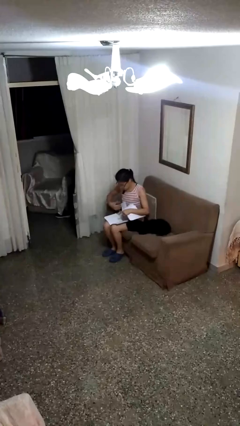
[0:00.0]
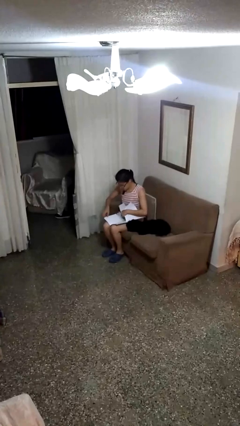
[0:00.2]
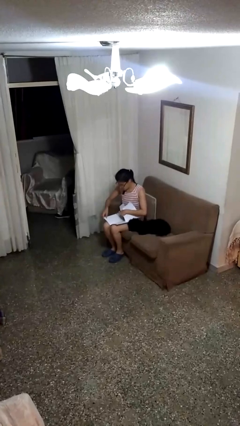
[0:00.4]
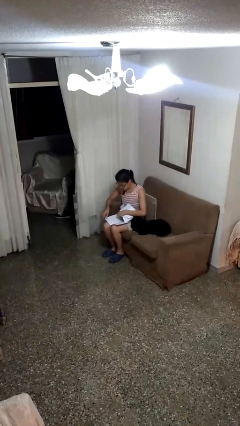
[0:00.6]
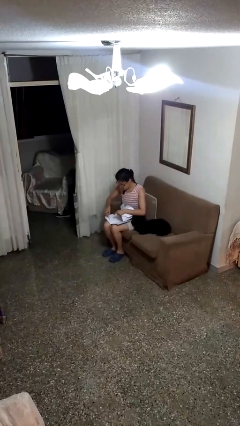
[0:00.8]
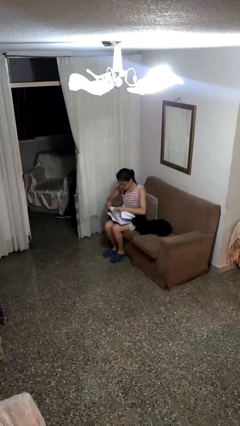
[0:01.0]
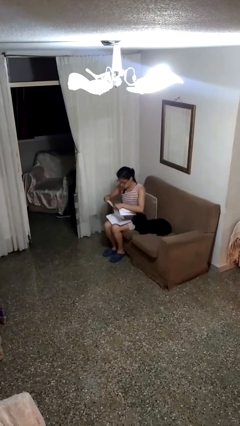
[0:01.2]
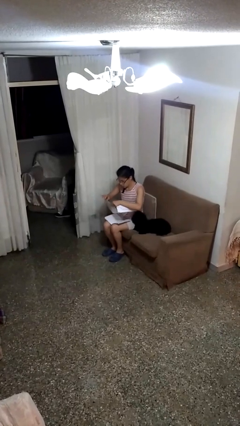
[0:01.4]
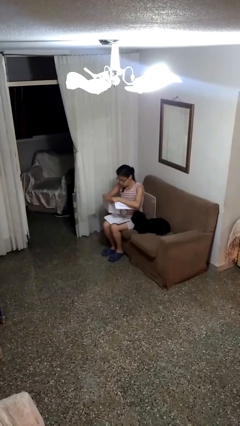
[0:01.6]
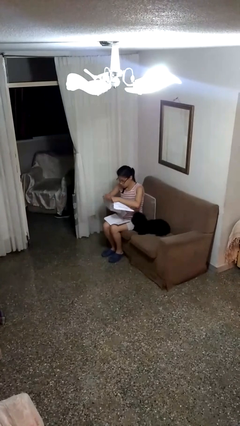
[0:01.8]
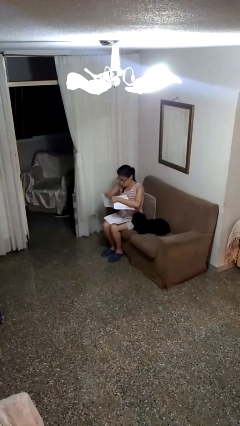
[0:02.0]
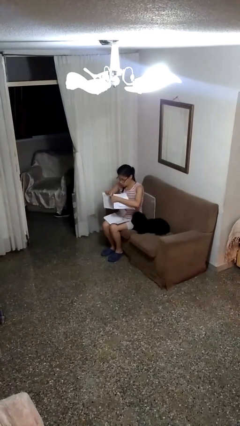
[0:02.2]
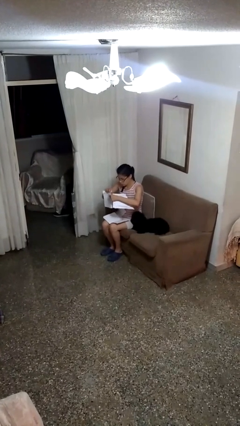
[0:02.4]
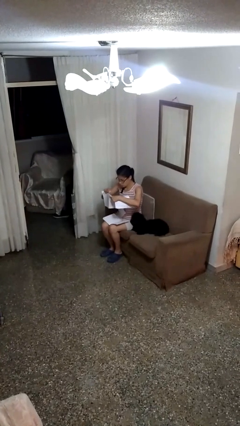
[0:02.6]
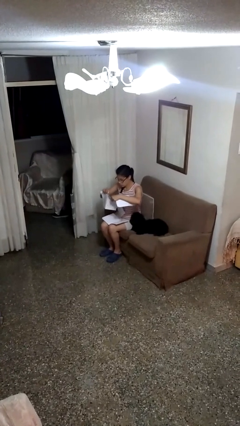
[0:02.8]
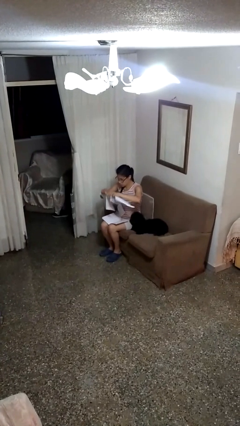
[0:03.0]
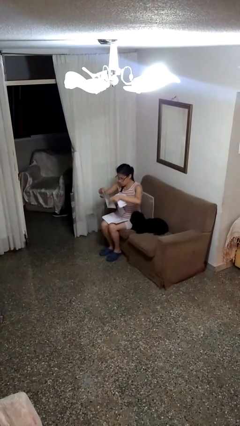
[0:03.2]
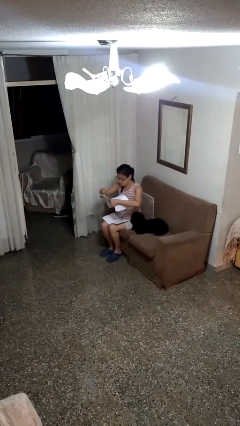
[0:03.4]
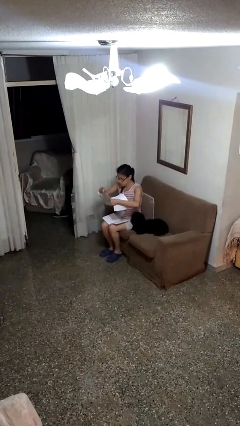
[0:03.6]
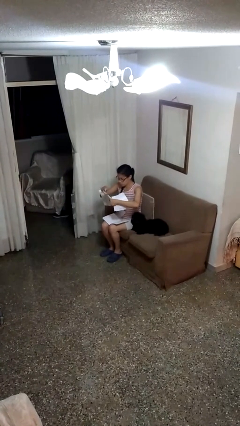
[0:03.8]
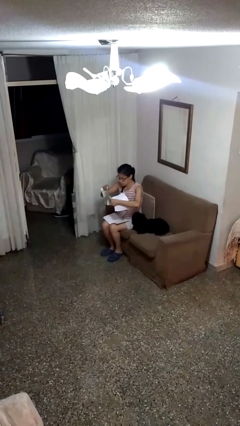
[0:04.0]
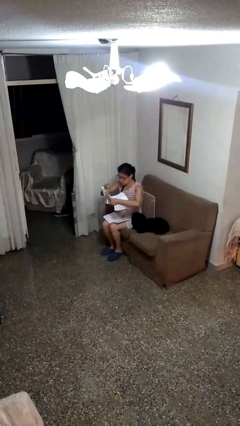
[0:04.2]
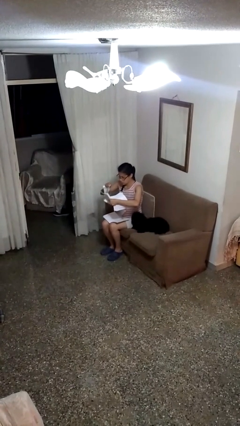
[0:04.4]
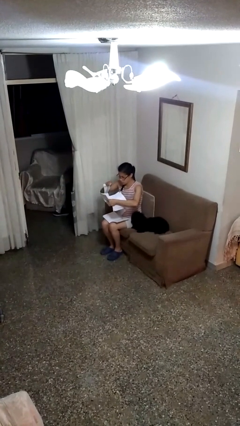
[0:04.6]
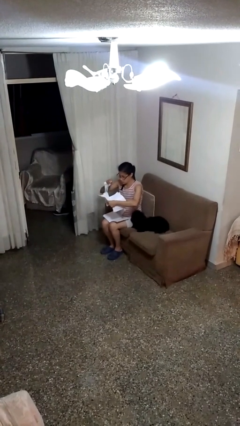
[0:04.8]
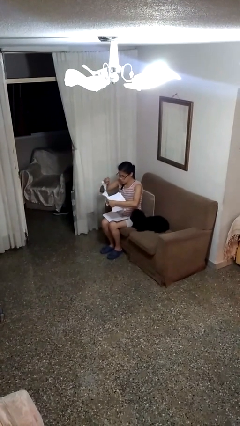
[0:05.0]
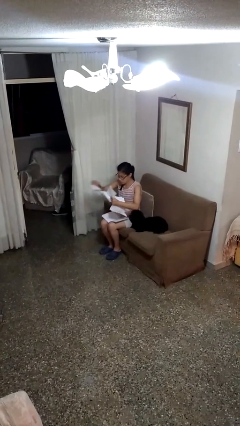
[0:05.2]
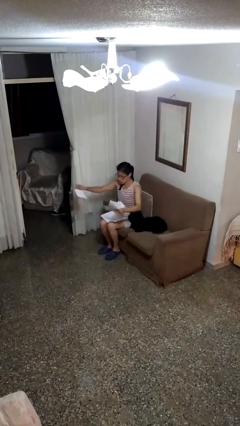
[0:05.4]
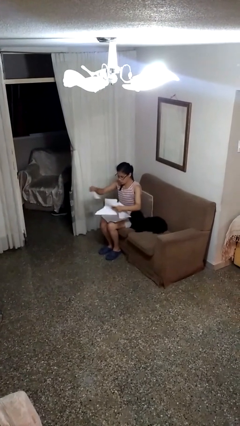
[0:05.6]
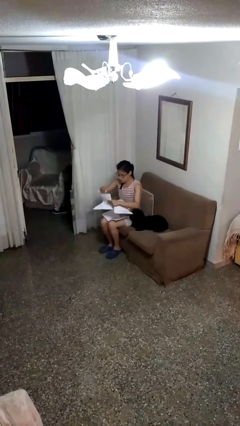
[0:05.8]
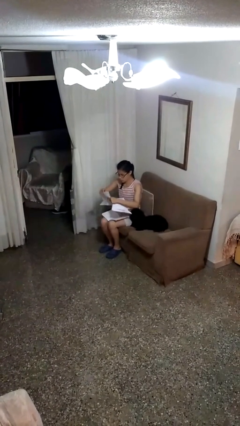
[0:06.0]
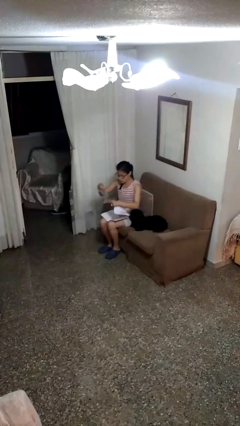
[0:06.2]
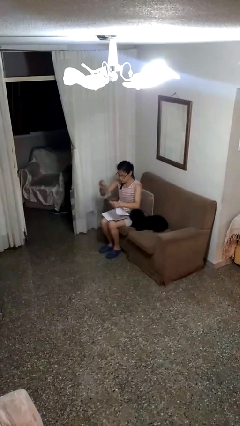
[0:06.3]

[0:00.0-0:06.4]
person tears paper

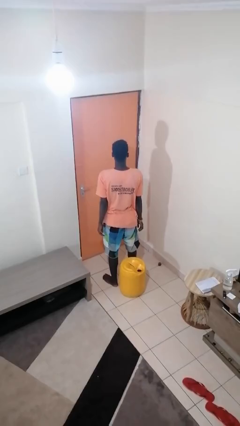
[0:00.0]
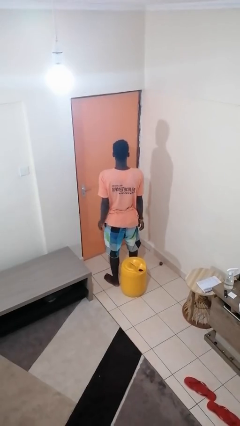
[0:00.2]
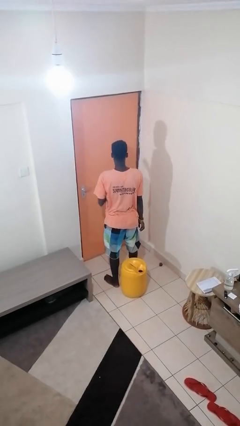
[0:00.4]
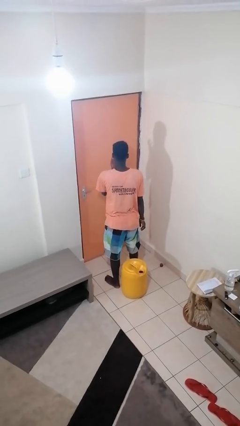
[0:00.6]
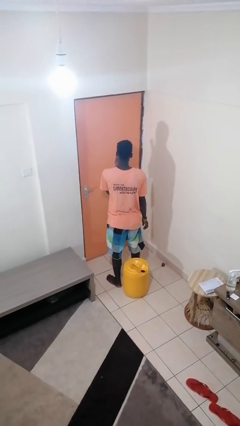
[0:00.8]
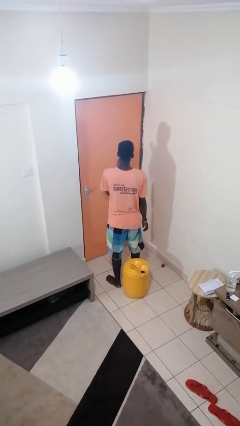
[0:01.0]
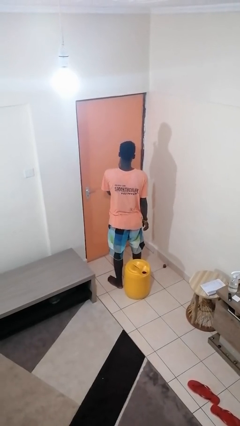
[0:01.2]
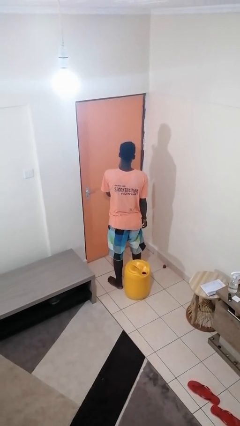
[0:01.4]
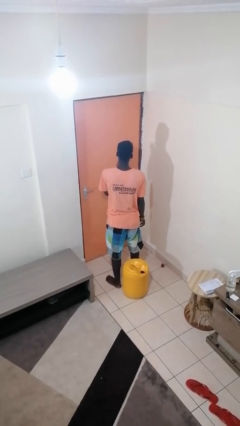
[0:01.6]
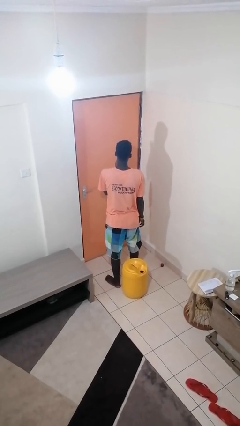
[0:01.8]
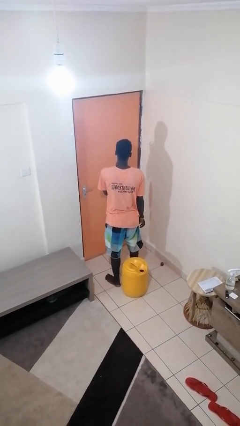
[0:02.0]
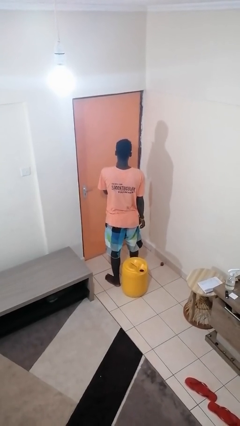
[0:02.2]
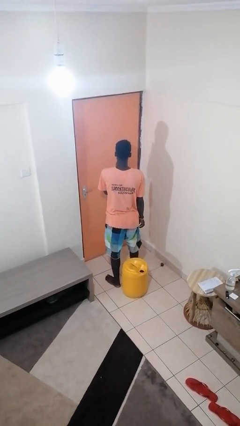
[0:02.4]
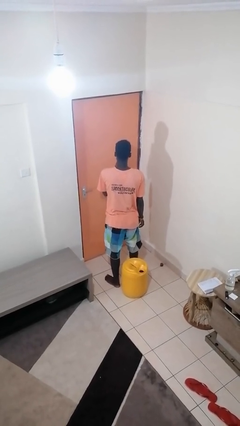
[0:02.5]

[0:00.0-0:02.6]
person licks fingers

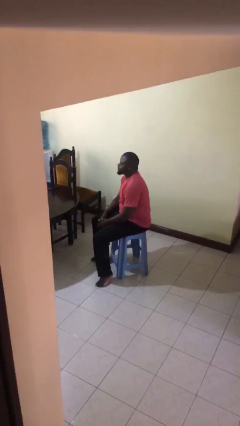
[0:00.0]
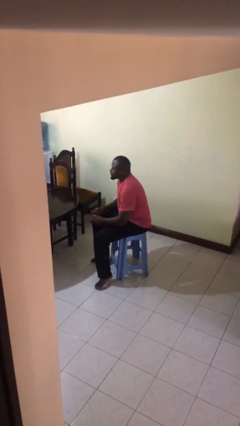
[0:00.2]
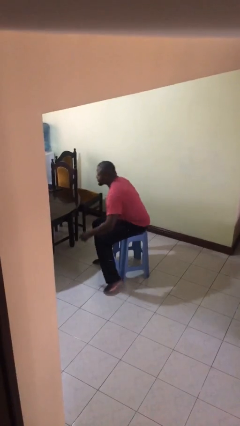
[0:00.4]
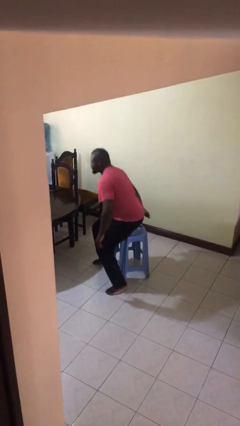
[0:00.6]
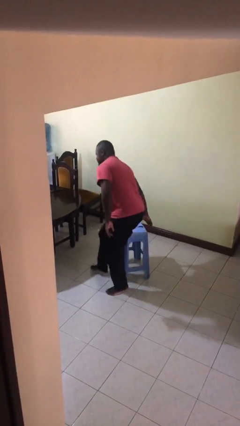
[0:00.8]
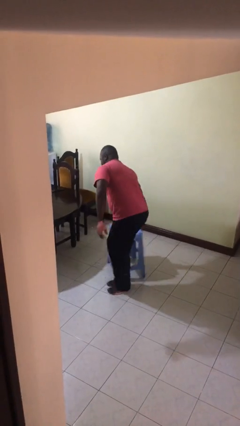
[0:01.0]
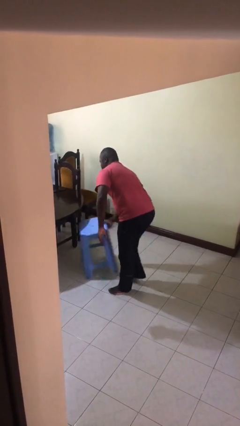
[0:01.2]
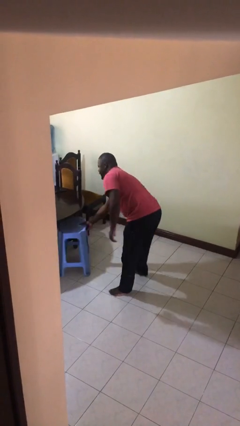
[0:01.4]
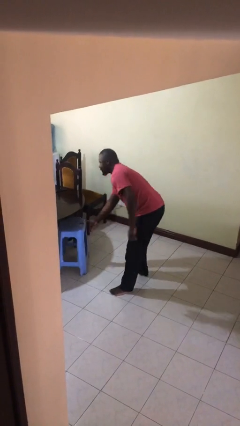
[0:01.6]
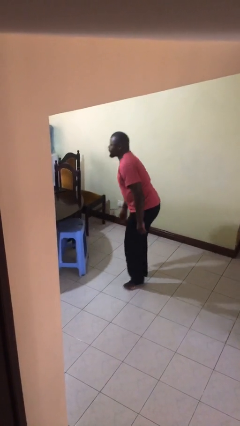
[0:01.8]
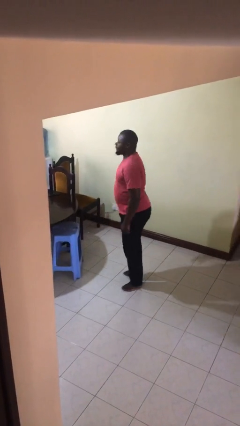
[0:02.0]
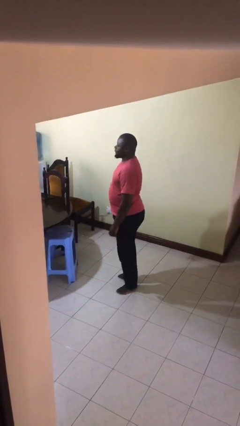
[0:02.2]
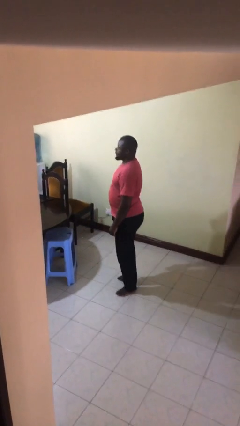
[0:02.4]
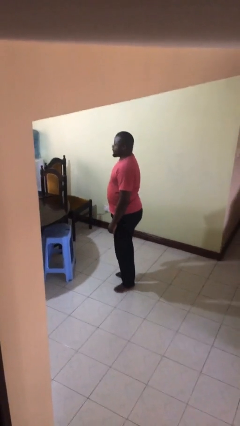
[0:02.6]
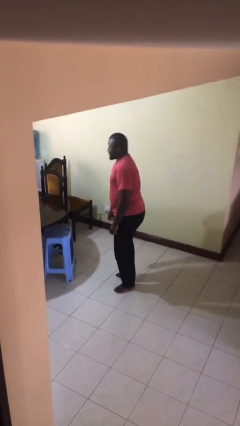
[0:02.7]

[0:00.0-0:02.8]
person stands up

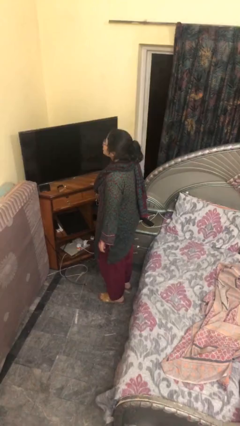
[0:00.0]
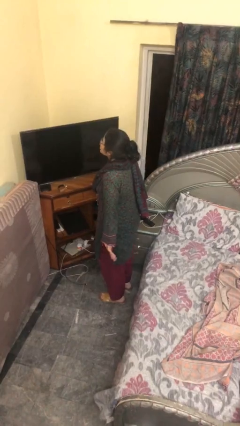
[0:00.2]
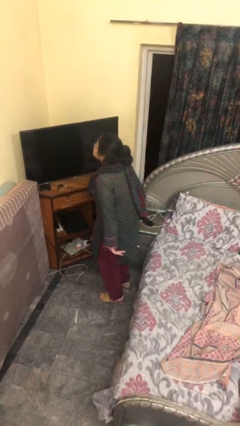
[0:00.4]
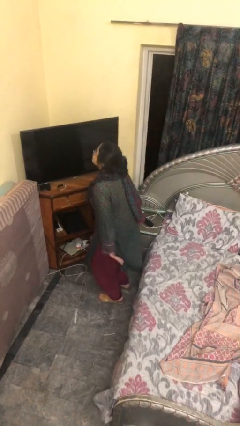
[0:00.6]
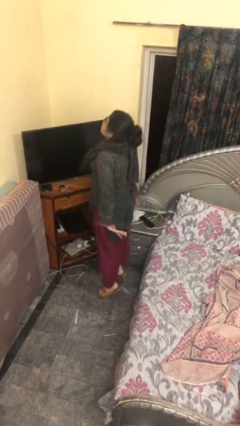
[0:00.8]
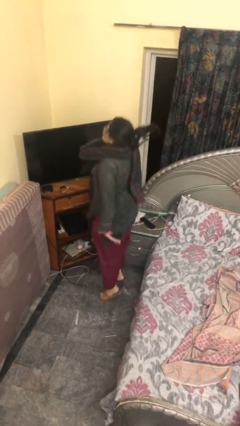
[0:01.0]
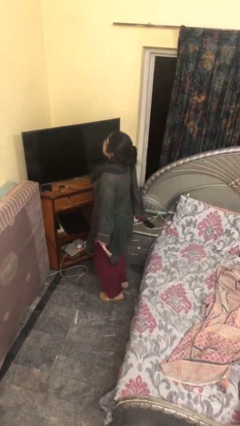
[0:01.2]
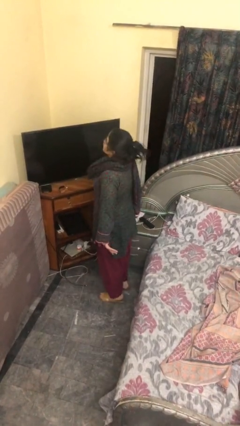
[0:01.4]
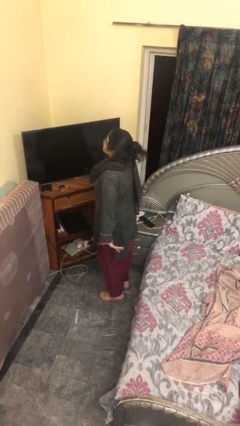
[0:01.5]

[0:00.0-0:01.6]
person jumps

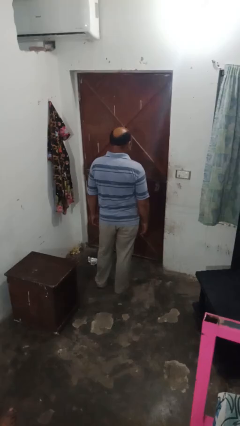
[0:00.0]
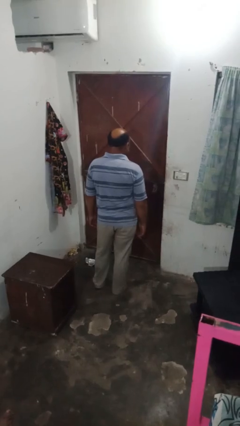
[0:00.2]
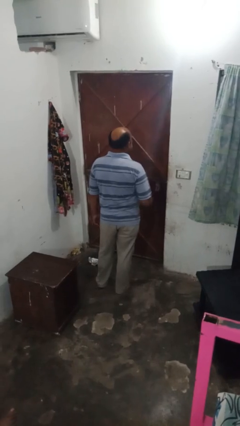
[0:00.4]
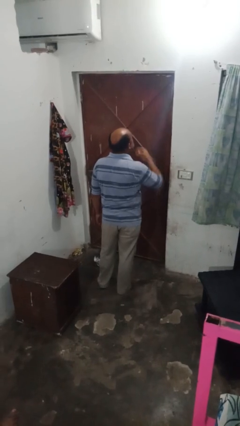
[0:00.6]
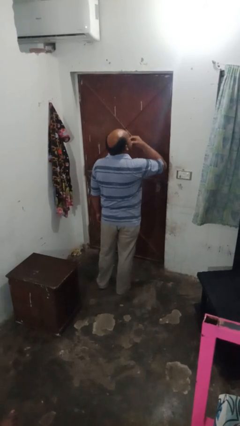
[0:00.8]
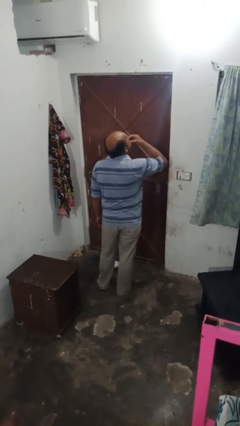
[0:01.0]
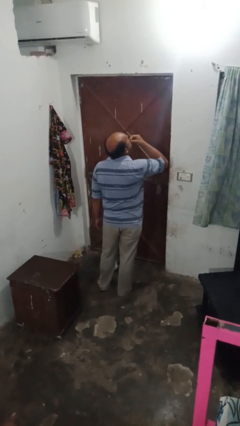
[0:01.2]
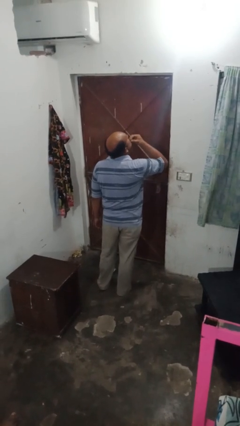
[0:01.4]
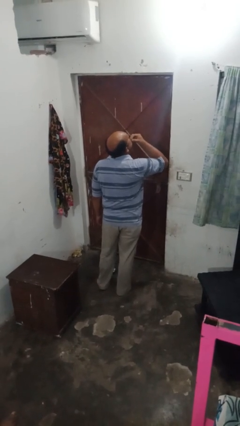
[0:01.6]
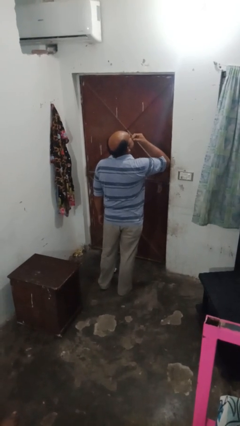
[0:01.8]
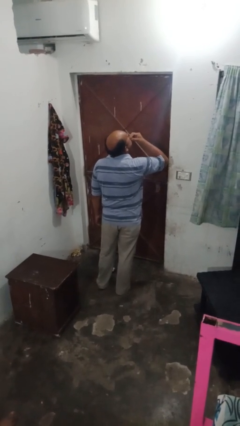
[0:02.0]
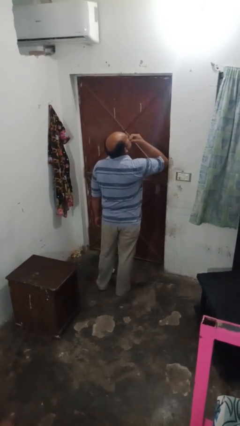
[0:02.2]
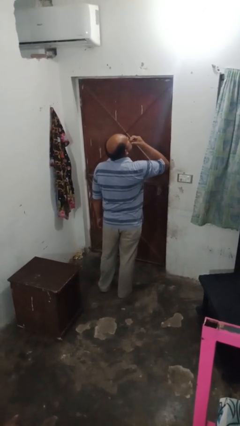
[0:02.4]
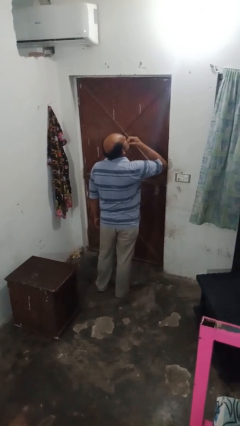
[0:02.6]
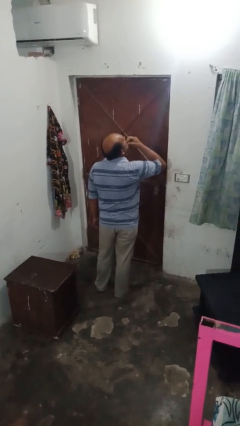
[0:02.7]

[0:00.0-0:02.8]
person strokes chin

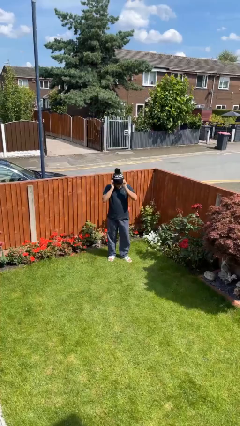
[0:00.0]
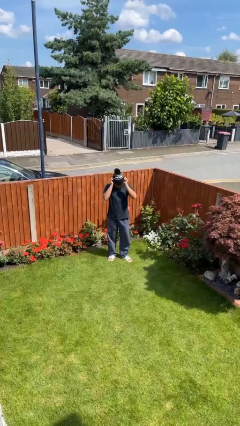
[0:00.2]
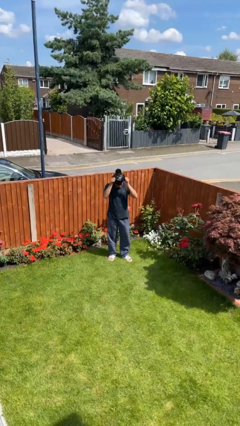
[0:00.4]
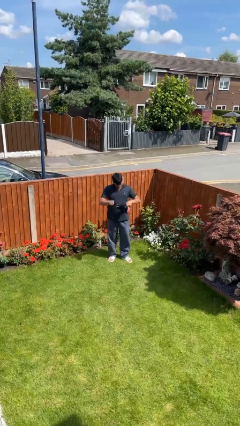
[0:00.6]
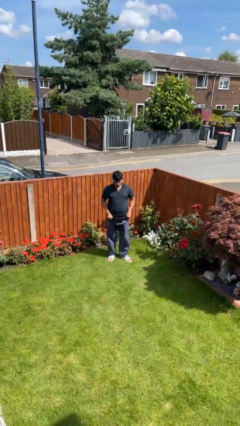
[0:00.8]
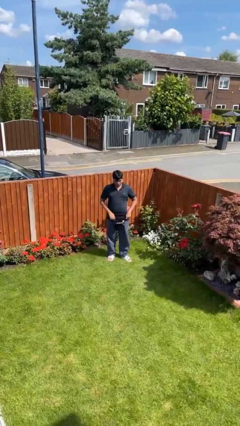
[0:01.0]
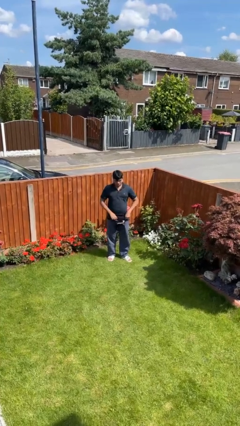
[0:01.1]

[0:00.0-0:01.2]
person takes off hat
